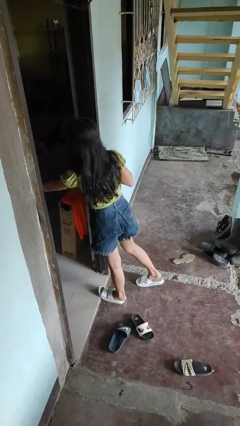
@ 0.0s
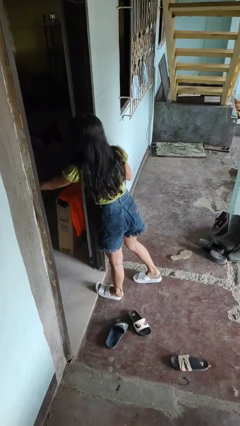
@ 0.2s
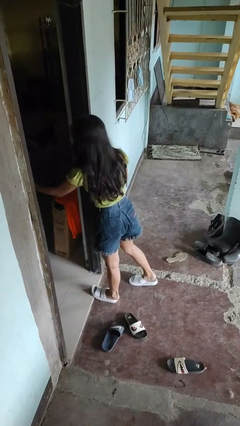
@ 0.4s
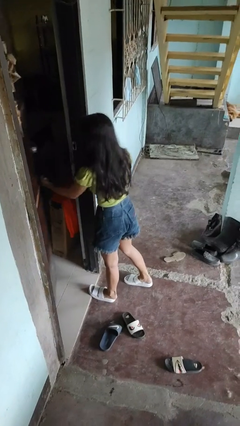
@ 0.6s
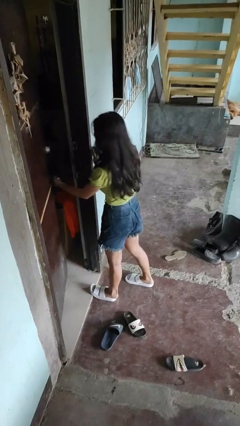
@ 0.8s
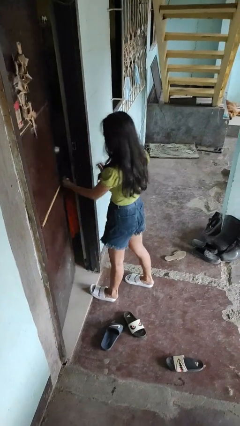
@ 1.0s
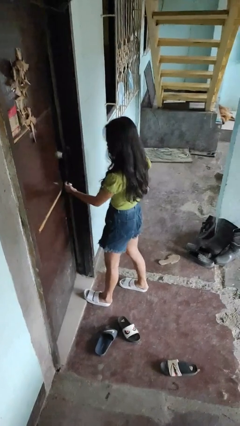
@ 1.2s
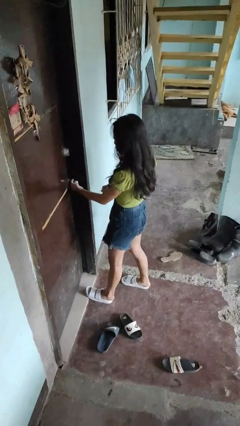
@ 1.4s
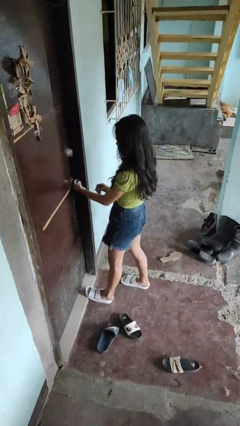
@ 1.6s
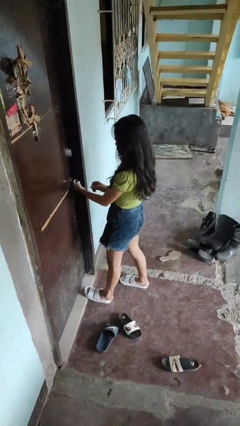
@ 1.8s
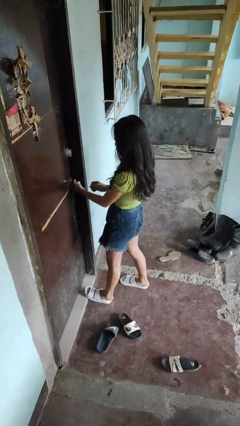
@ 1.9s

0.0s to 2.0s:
person closes facility door

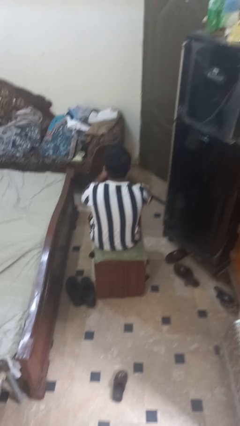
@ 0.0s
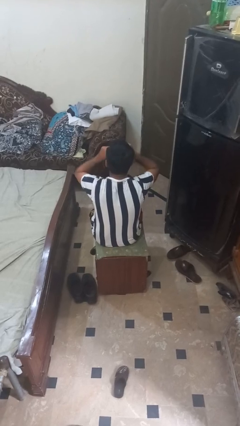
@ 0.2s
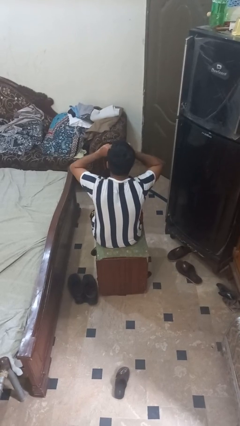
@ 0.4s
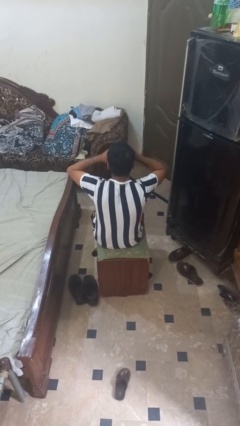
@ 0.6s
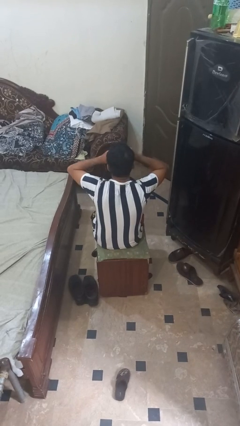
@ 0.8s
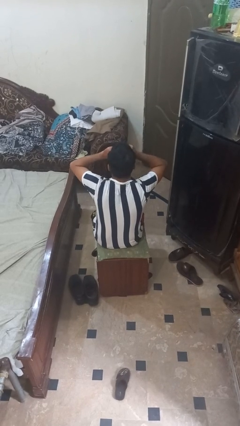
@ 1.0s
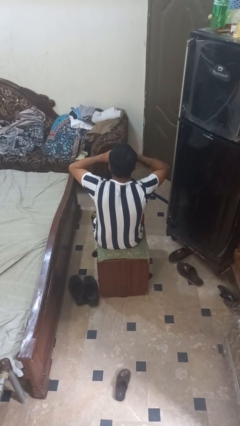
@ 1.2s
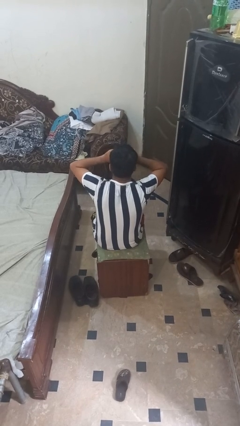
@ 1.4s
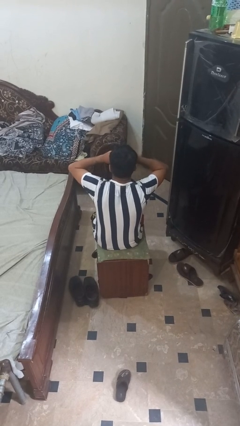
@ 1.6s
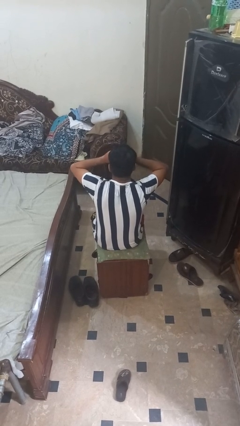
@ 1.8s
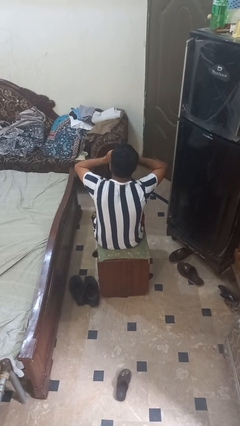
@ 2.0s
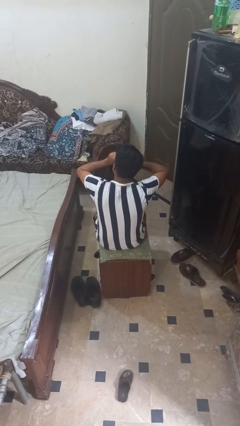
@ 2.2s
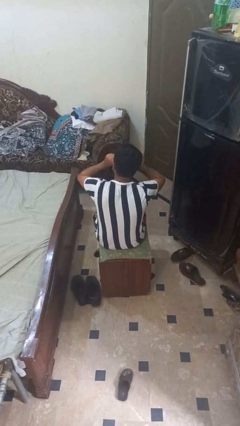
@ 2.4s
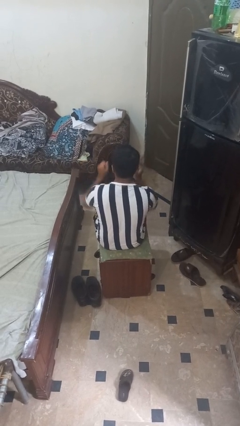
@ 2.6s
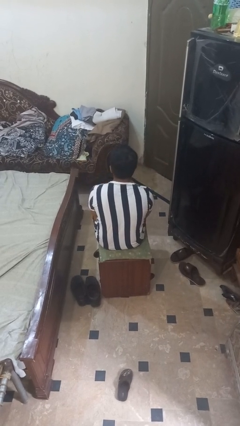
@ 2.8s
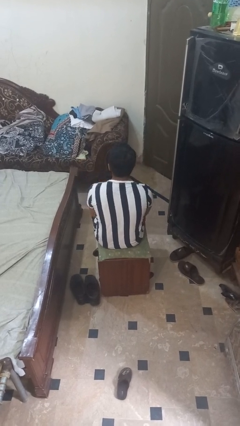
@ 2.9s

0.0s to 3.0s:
person rubs eyes

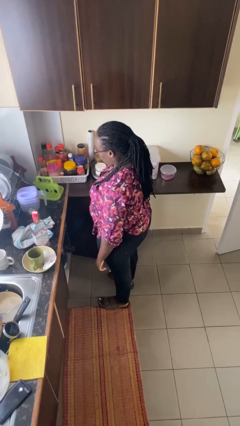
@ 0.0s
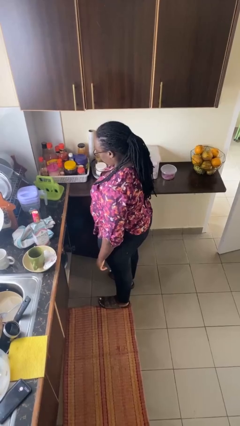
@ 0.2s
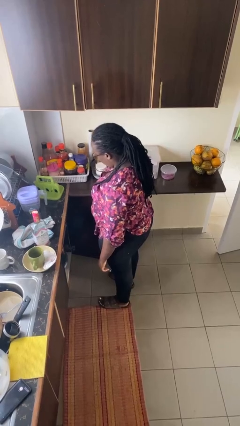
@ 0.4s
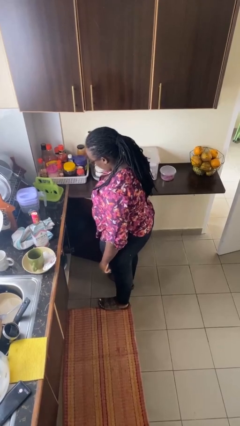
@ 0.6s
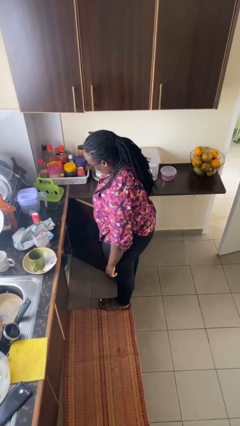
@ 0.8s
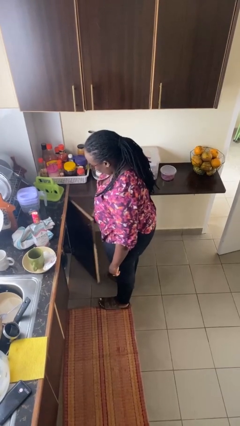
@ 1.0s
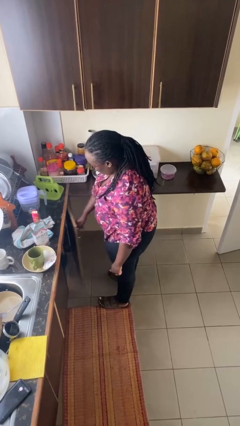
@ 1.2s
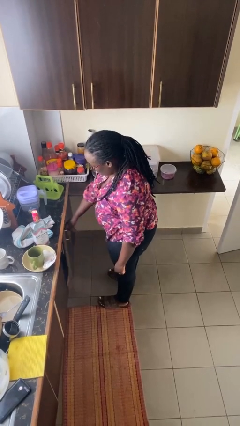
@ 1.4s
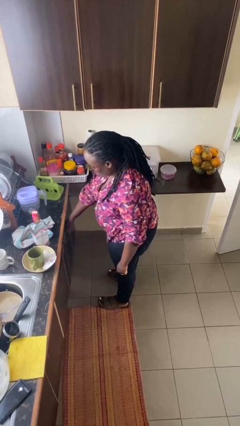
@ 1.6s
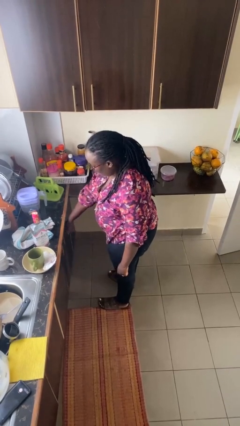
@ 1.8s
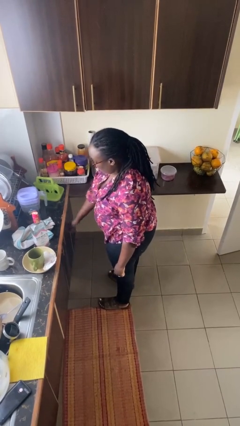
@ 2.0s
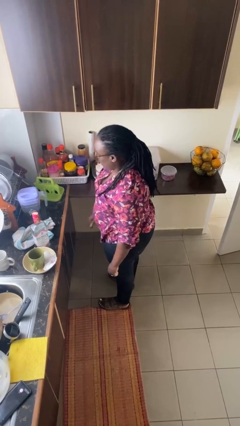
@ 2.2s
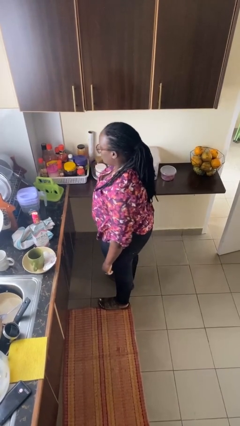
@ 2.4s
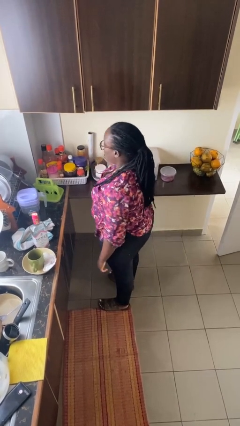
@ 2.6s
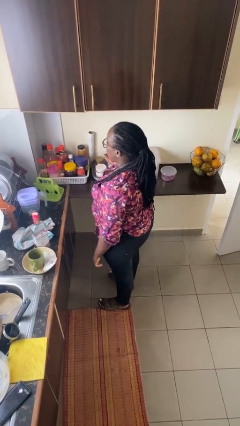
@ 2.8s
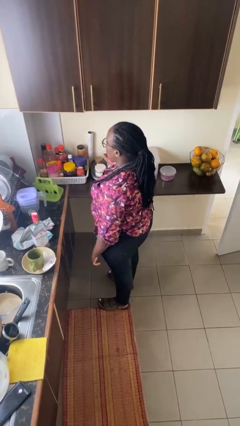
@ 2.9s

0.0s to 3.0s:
person closes cabinet

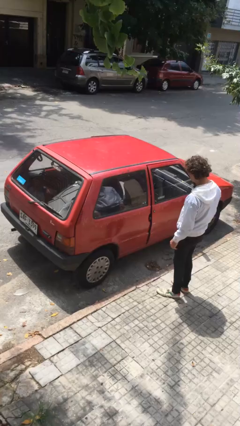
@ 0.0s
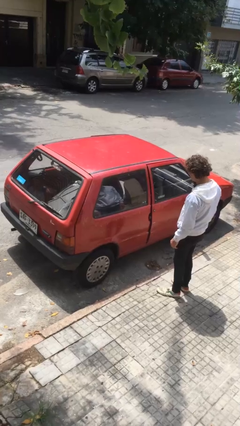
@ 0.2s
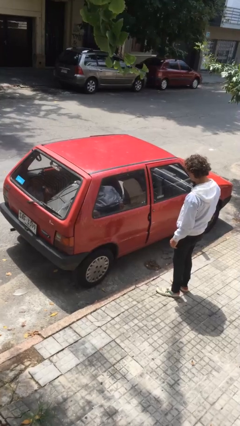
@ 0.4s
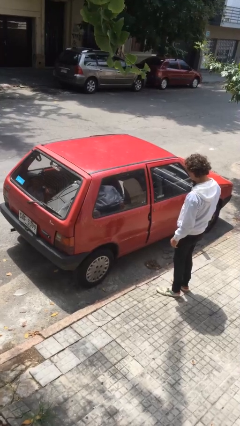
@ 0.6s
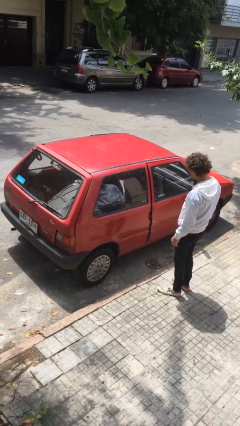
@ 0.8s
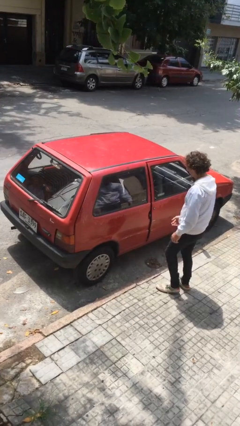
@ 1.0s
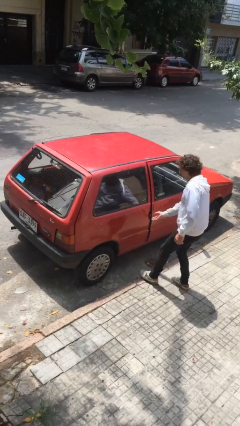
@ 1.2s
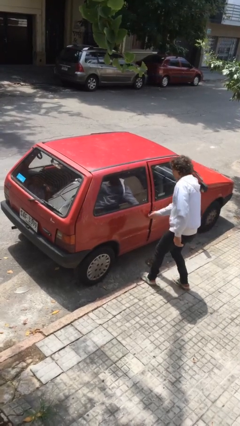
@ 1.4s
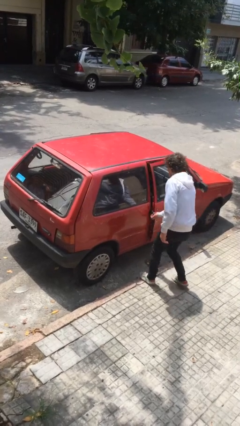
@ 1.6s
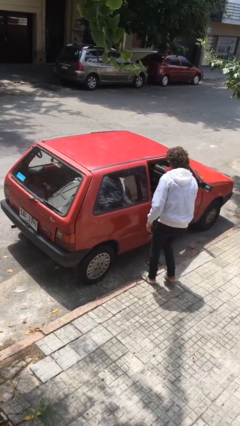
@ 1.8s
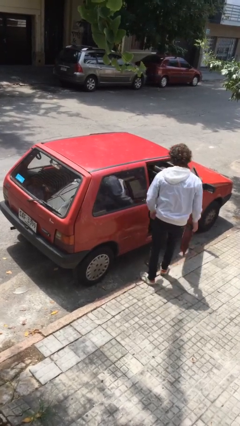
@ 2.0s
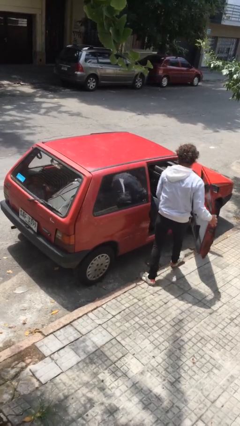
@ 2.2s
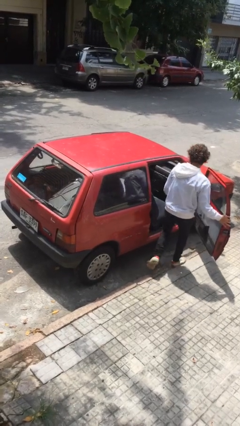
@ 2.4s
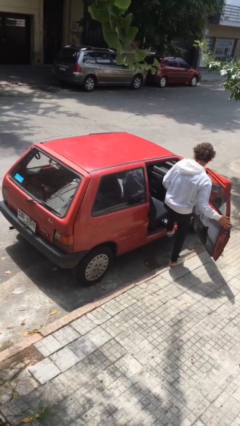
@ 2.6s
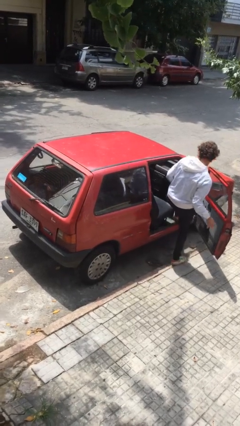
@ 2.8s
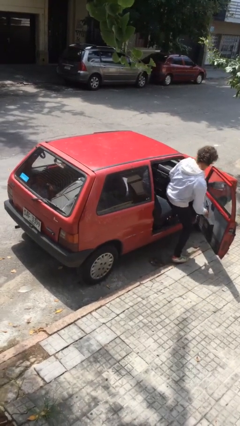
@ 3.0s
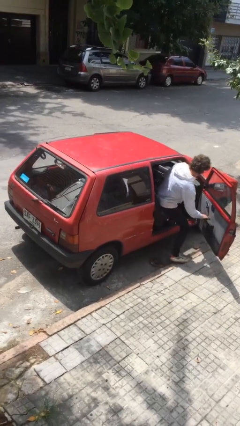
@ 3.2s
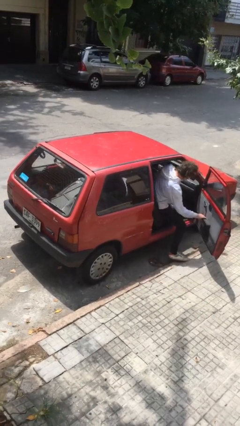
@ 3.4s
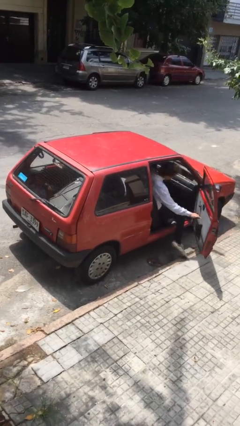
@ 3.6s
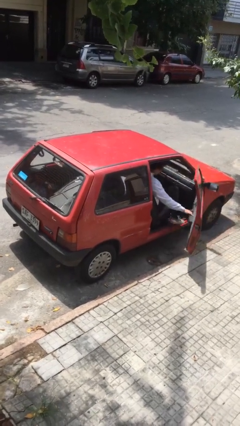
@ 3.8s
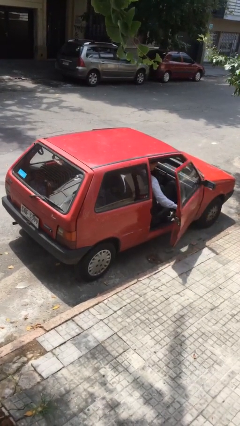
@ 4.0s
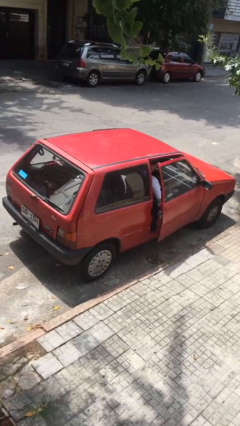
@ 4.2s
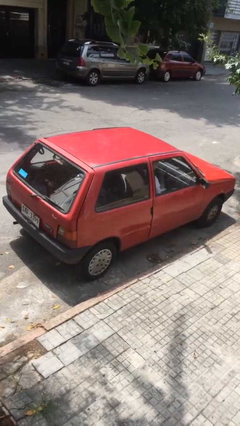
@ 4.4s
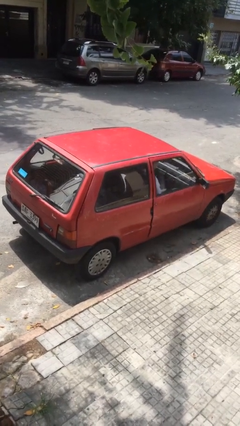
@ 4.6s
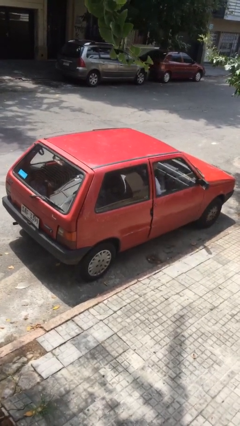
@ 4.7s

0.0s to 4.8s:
car picks up person

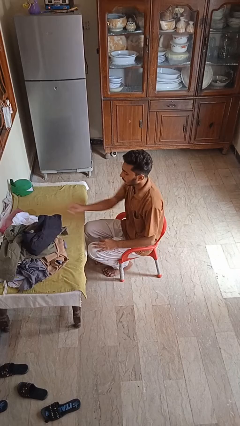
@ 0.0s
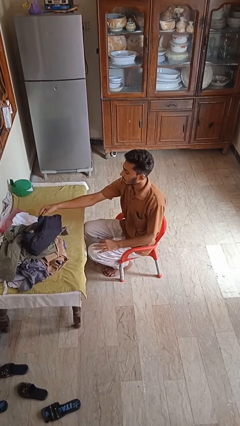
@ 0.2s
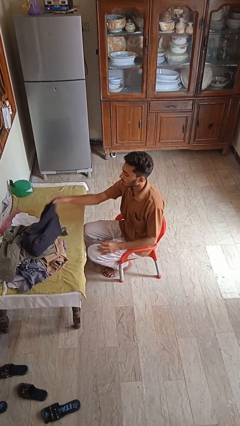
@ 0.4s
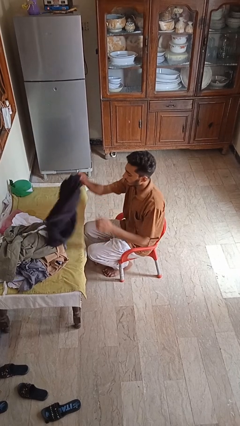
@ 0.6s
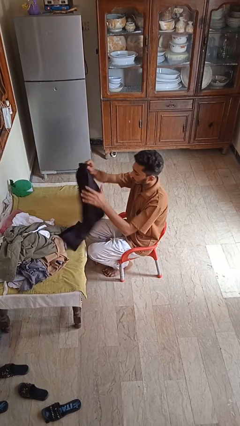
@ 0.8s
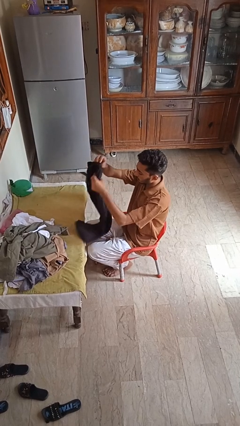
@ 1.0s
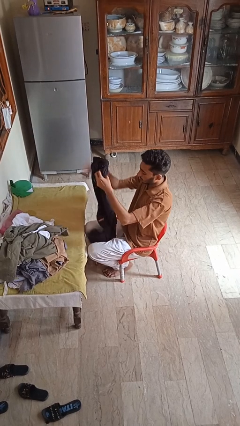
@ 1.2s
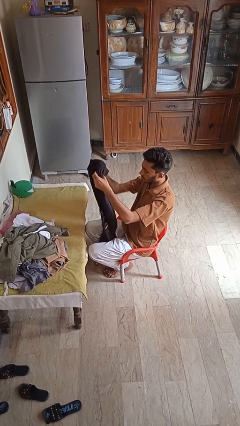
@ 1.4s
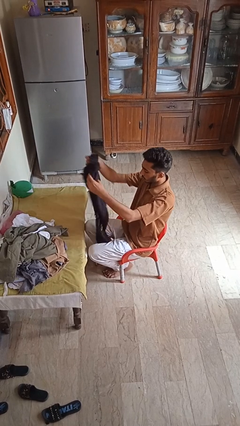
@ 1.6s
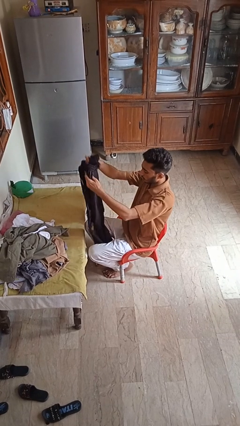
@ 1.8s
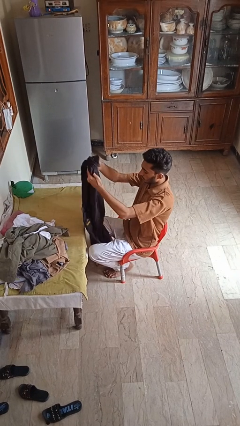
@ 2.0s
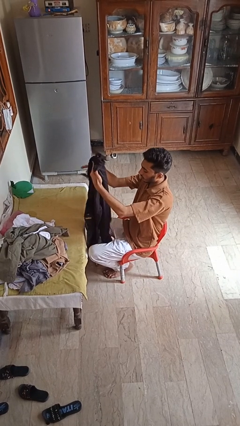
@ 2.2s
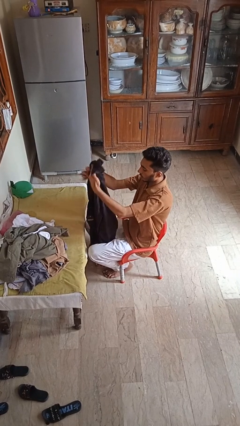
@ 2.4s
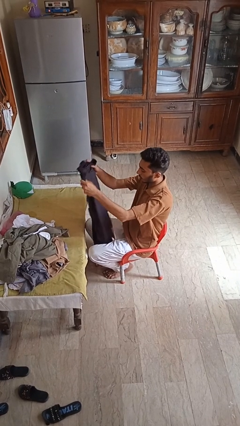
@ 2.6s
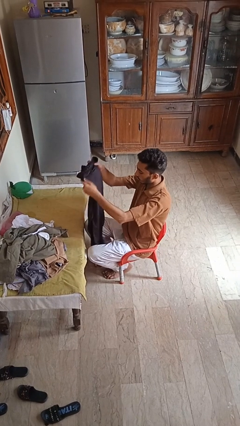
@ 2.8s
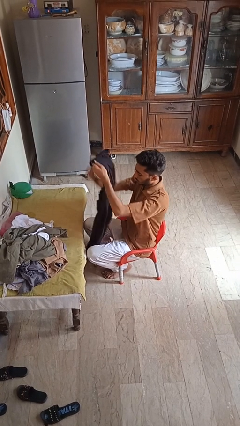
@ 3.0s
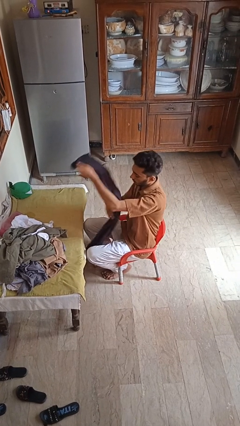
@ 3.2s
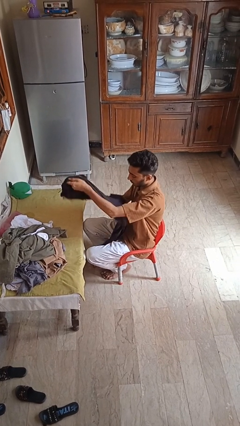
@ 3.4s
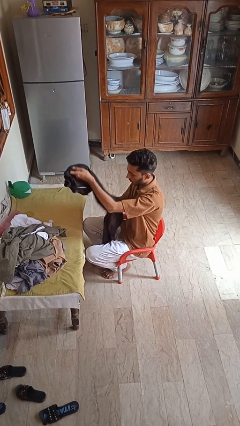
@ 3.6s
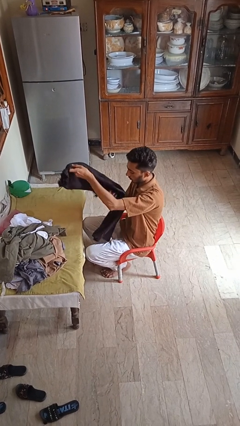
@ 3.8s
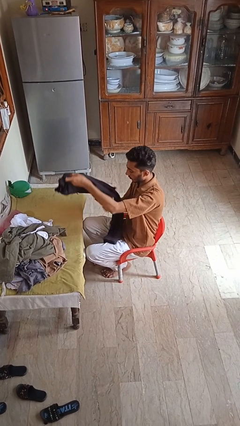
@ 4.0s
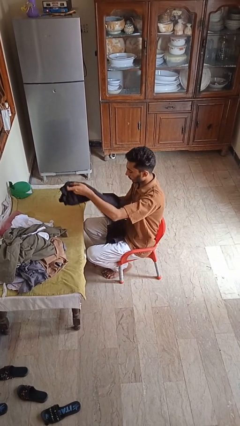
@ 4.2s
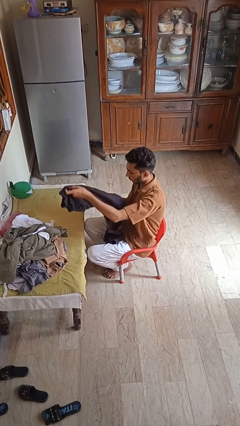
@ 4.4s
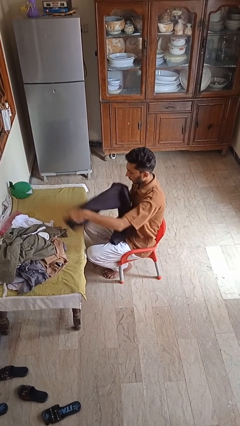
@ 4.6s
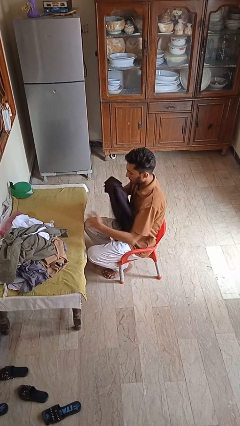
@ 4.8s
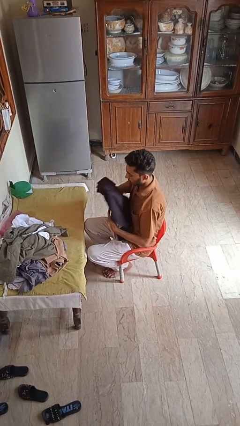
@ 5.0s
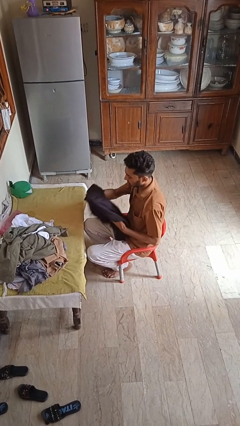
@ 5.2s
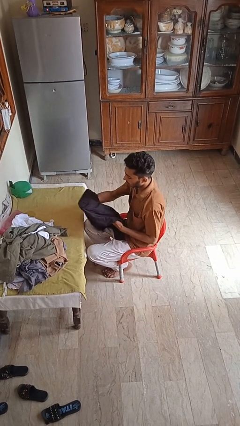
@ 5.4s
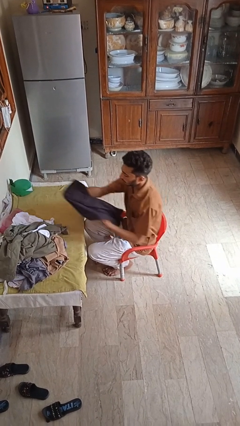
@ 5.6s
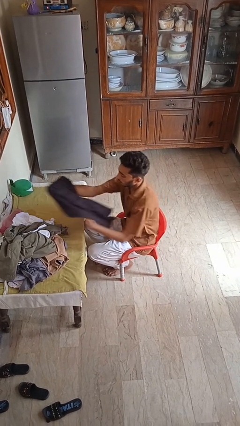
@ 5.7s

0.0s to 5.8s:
person folds pants
